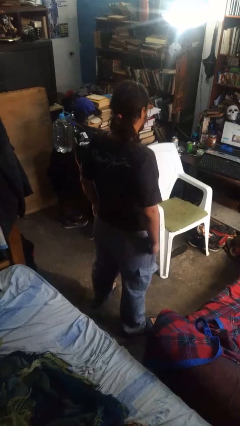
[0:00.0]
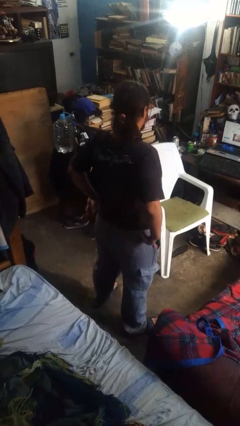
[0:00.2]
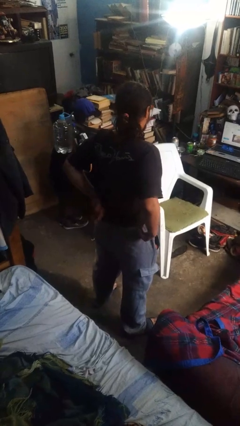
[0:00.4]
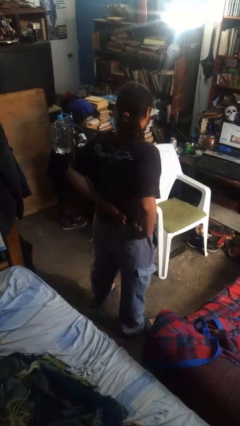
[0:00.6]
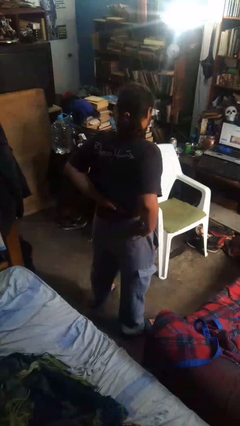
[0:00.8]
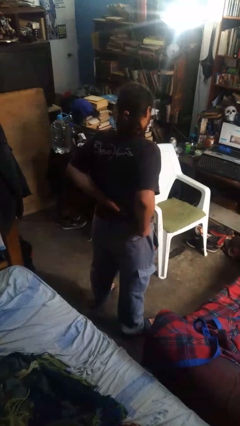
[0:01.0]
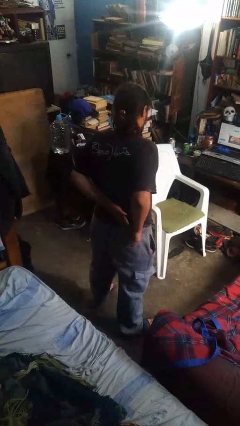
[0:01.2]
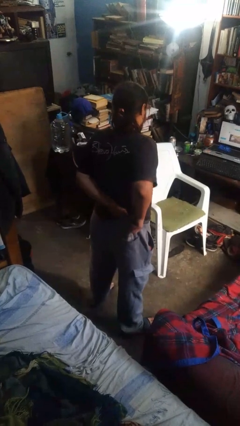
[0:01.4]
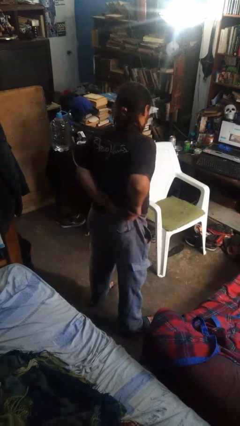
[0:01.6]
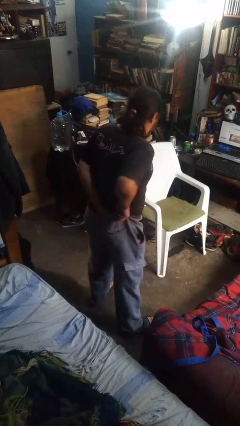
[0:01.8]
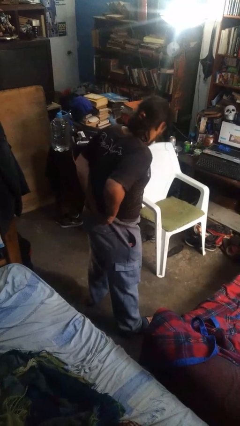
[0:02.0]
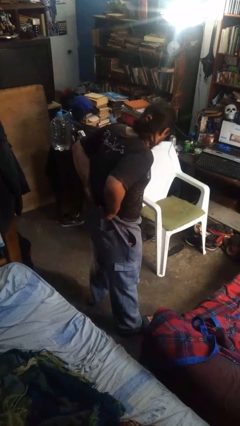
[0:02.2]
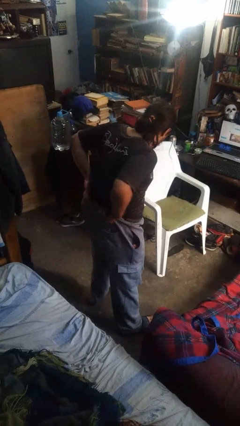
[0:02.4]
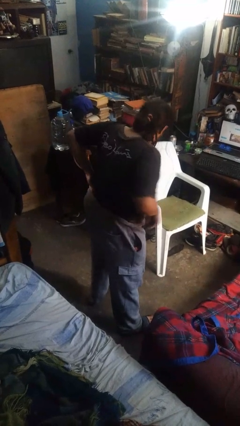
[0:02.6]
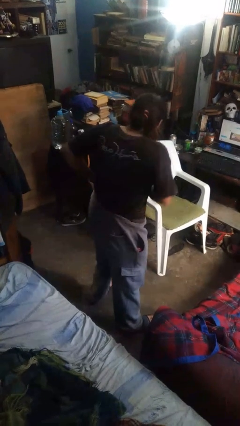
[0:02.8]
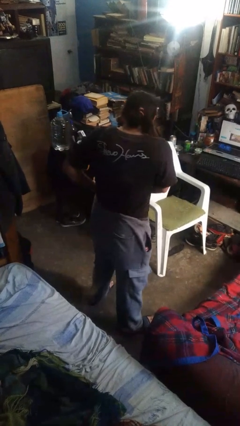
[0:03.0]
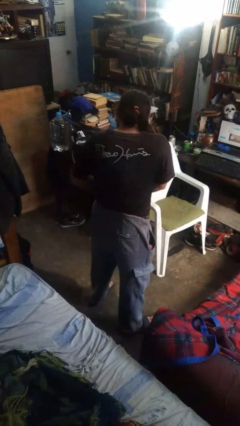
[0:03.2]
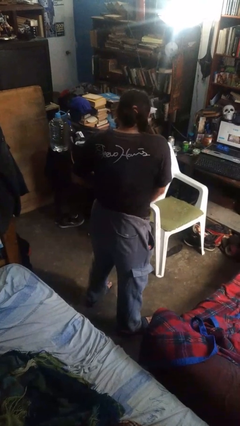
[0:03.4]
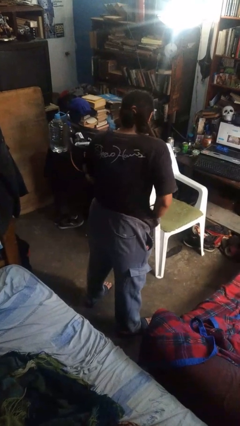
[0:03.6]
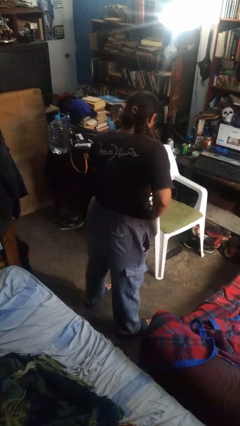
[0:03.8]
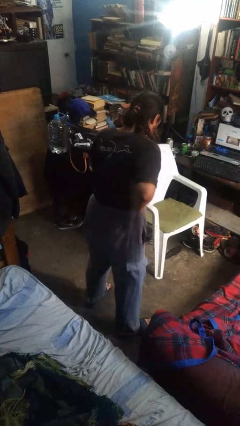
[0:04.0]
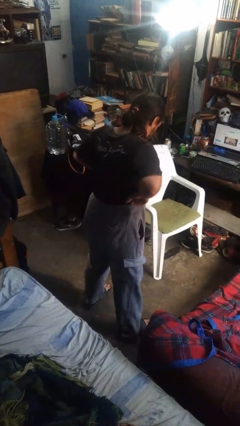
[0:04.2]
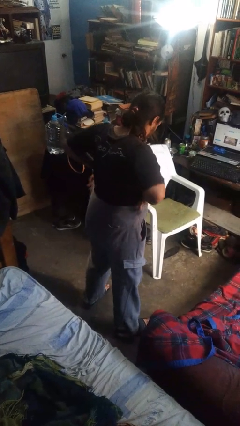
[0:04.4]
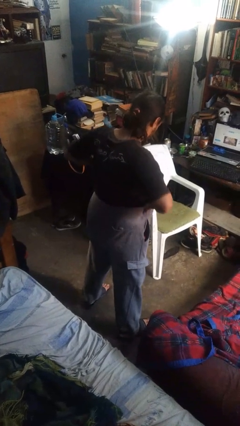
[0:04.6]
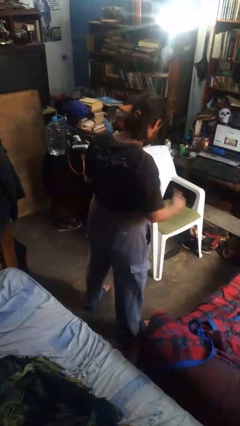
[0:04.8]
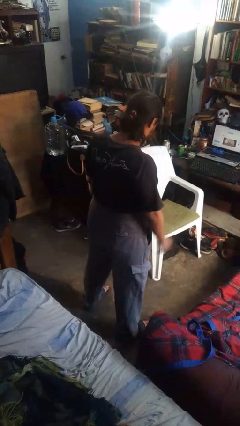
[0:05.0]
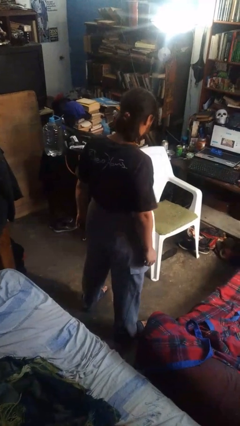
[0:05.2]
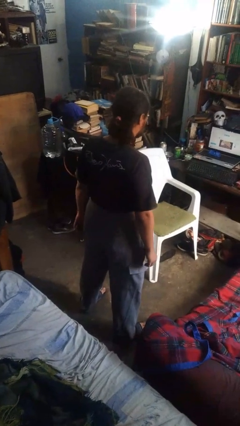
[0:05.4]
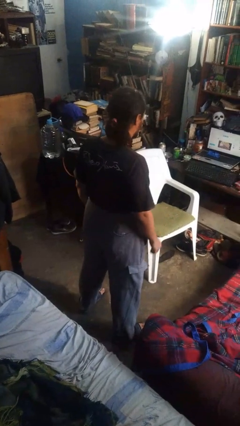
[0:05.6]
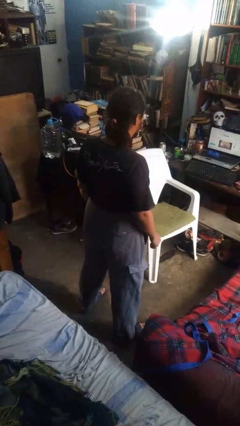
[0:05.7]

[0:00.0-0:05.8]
person tucks in shirt

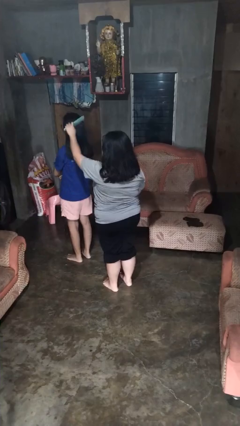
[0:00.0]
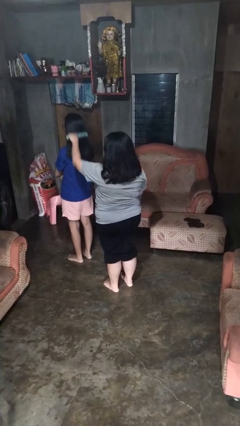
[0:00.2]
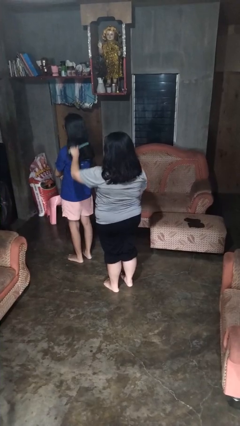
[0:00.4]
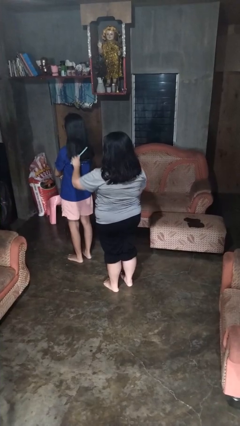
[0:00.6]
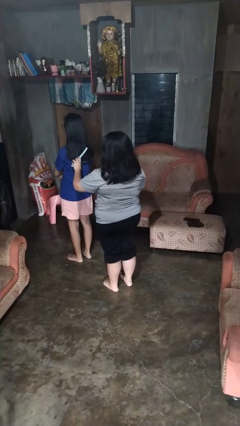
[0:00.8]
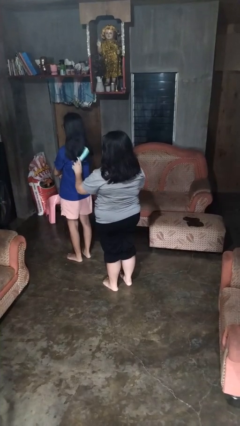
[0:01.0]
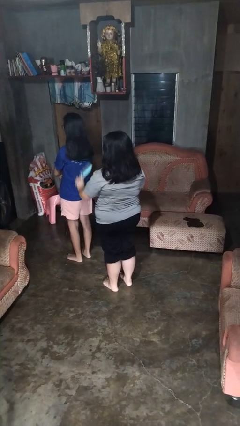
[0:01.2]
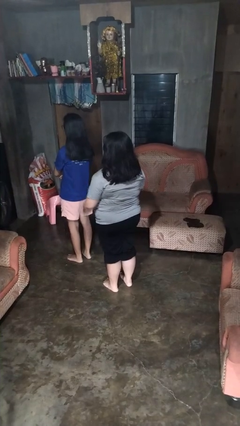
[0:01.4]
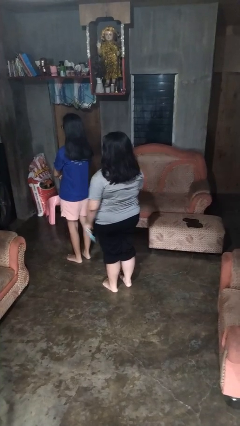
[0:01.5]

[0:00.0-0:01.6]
person brushes hair of person

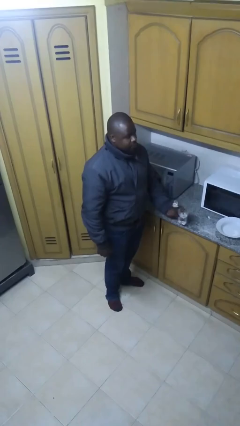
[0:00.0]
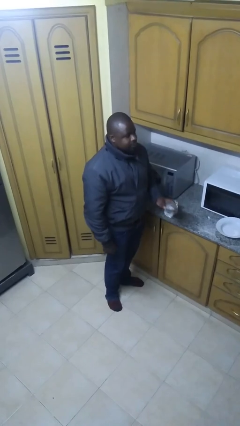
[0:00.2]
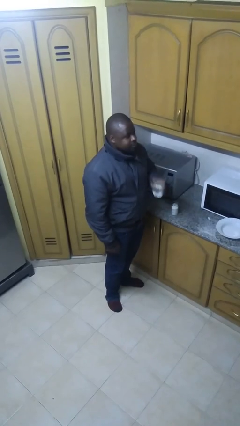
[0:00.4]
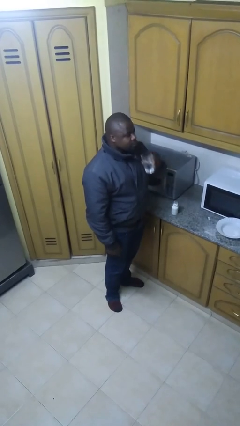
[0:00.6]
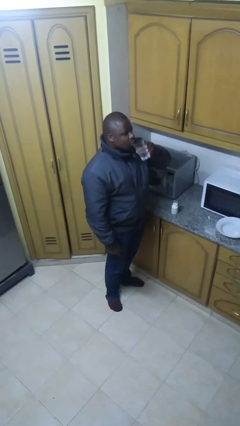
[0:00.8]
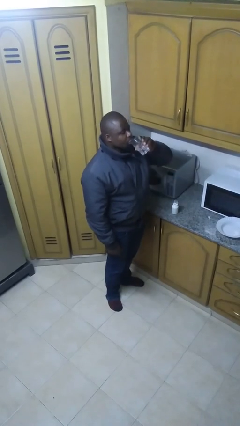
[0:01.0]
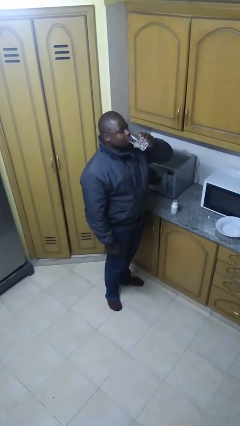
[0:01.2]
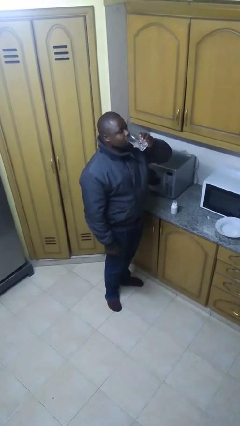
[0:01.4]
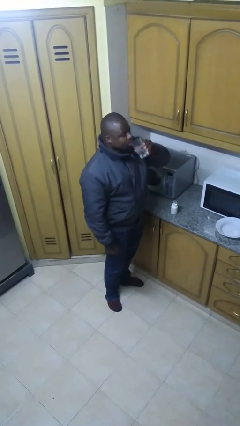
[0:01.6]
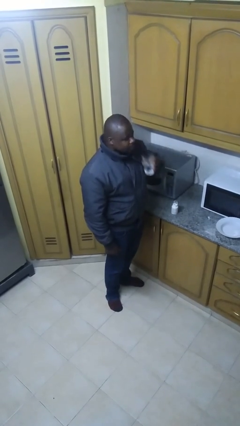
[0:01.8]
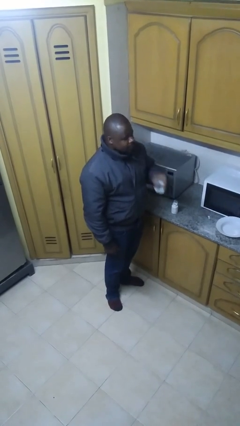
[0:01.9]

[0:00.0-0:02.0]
person drinks from cup

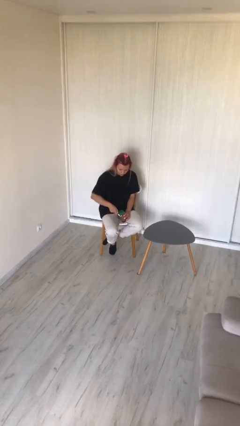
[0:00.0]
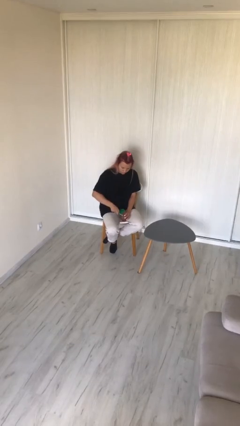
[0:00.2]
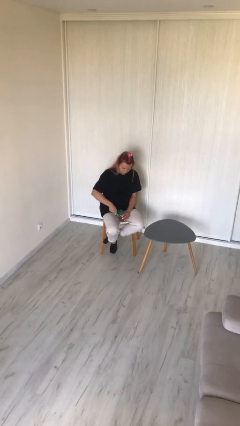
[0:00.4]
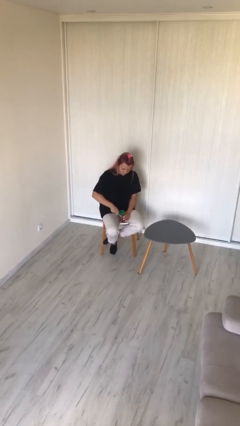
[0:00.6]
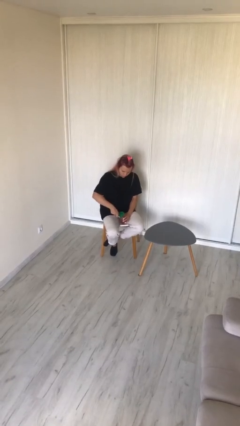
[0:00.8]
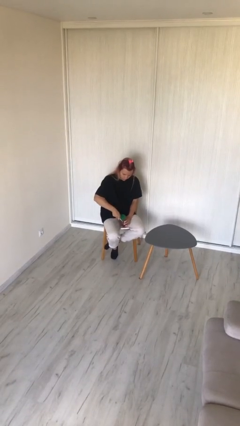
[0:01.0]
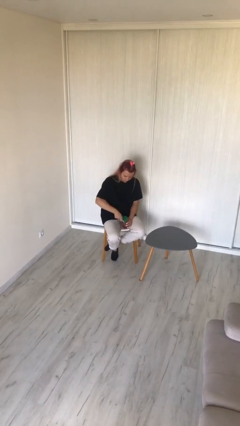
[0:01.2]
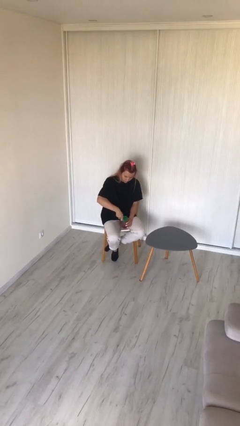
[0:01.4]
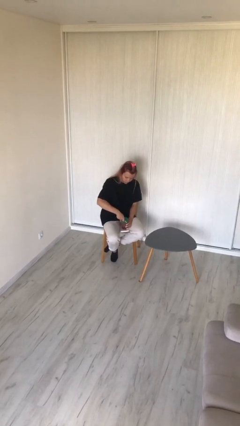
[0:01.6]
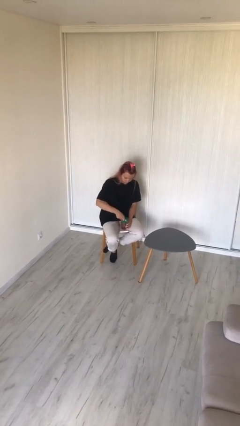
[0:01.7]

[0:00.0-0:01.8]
person opens can with can opener

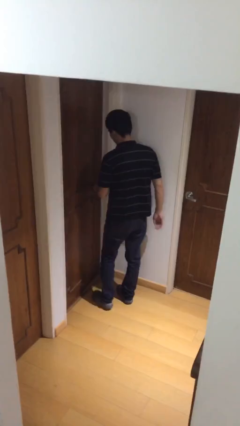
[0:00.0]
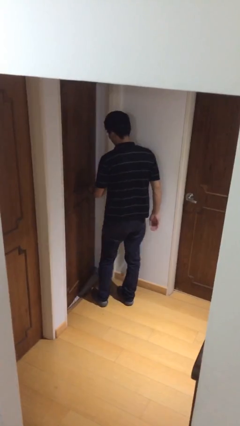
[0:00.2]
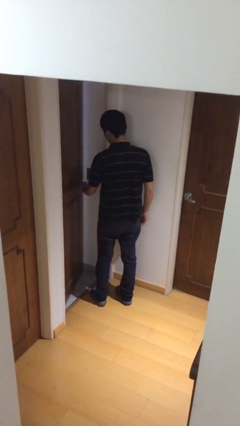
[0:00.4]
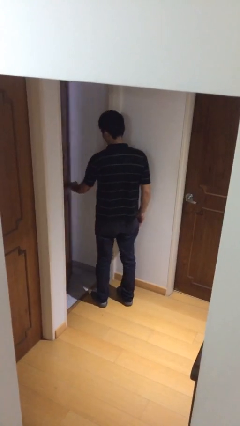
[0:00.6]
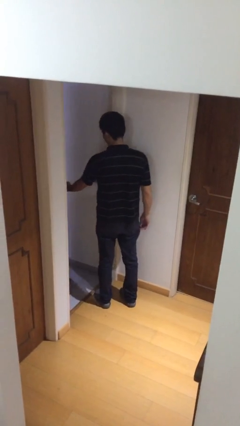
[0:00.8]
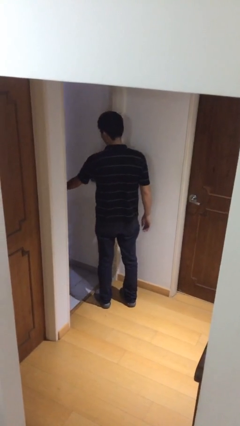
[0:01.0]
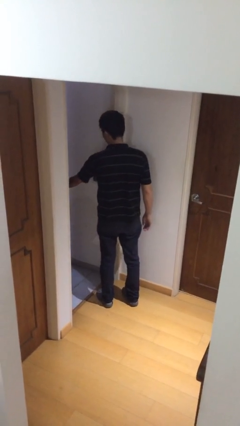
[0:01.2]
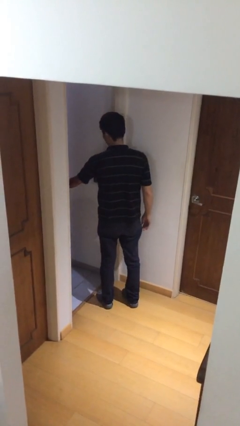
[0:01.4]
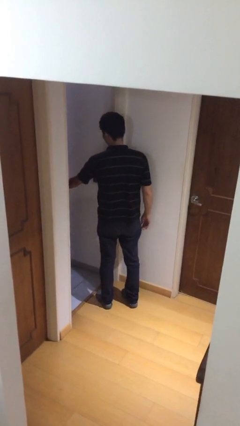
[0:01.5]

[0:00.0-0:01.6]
person opens facility door

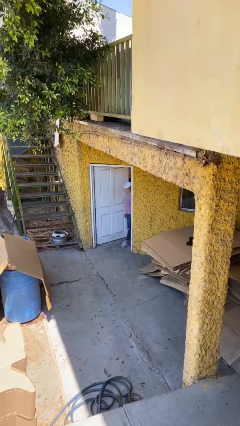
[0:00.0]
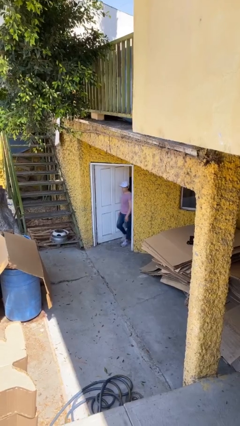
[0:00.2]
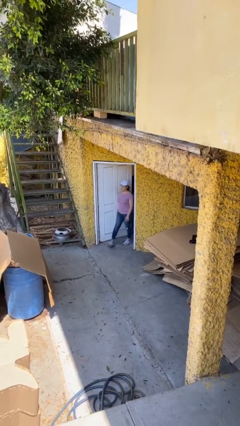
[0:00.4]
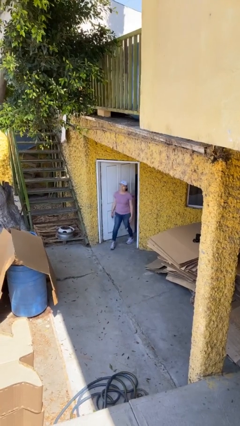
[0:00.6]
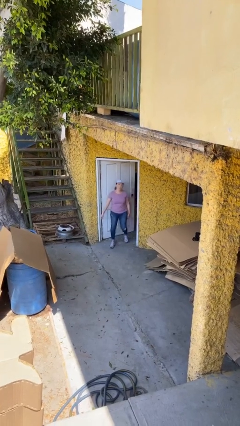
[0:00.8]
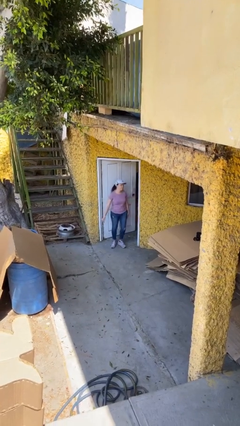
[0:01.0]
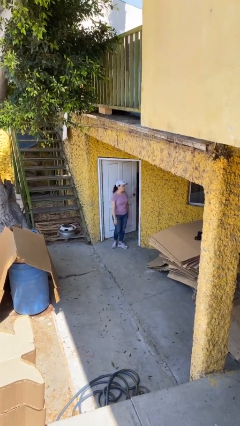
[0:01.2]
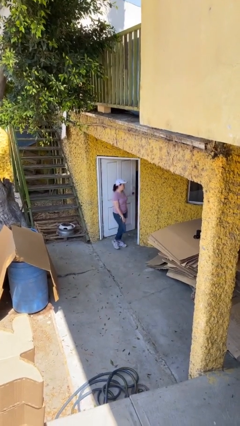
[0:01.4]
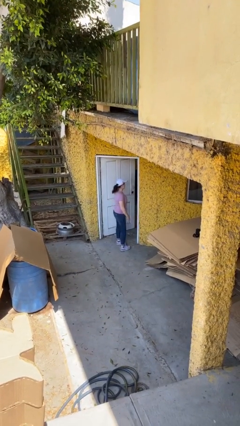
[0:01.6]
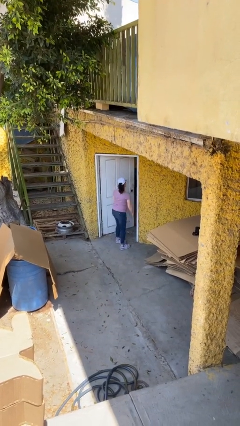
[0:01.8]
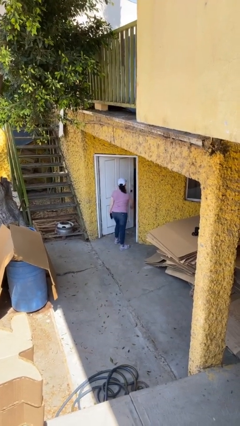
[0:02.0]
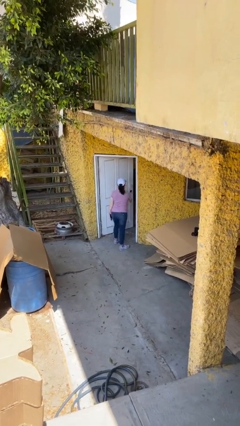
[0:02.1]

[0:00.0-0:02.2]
person enters scene through structure

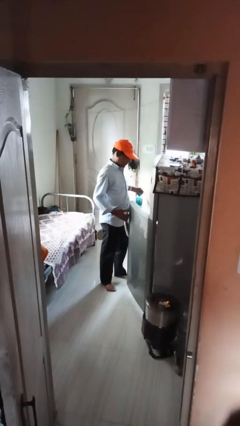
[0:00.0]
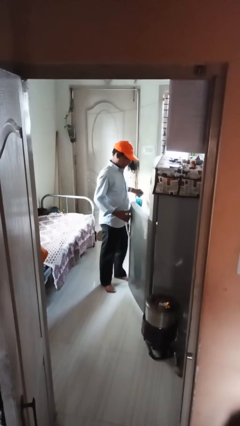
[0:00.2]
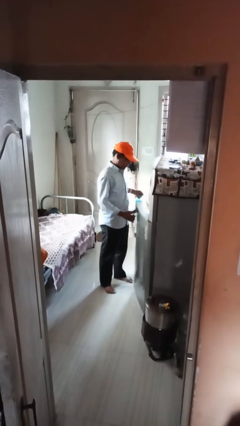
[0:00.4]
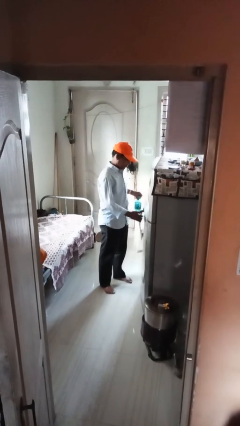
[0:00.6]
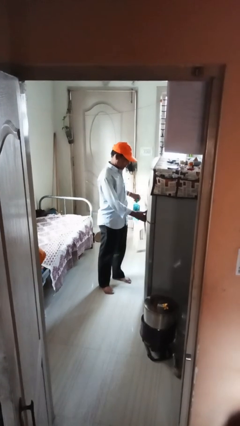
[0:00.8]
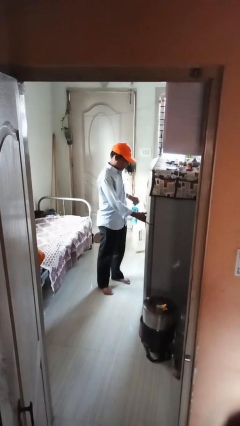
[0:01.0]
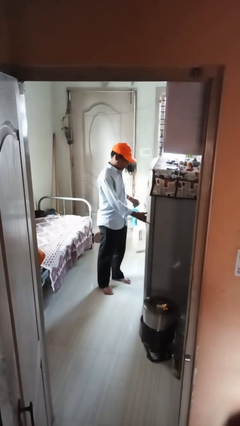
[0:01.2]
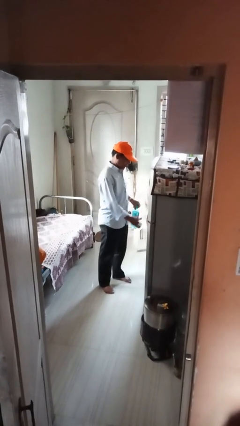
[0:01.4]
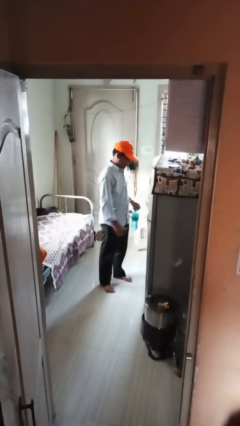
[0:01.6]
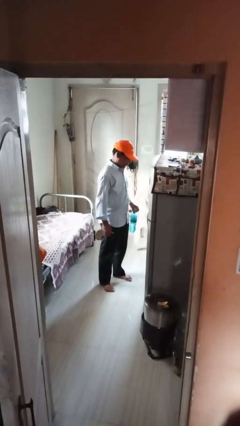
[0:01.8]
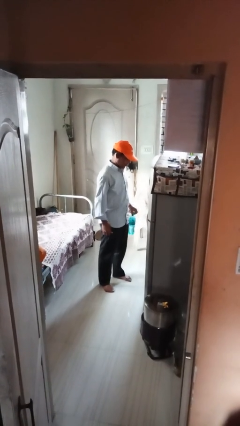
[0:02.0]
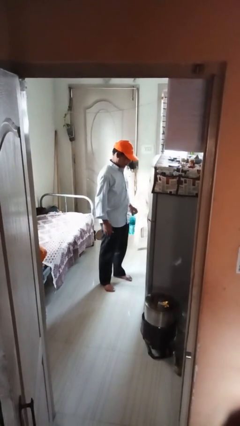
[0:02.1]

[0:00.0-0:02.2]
person closes refrigerator
